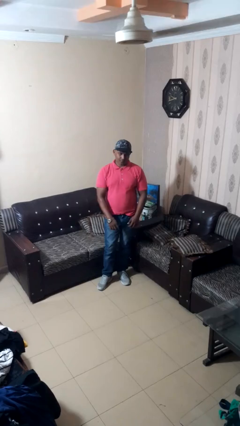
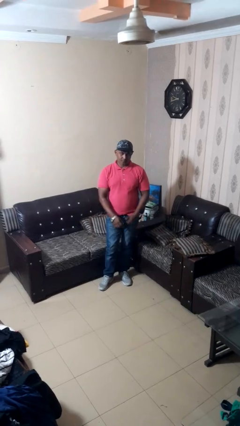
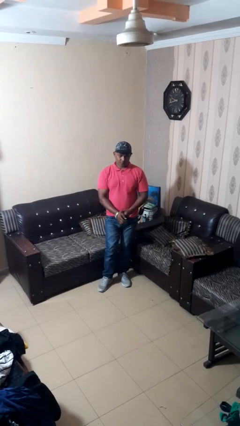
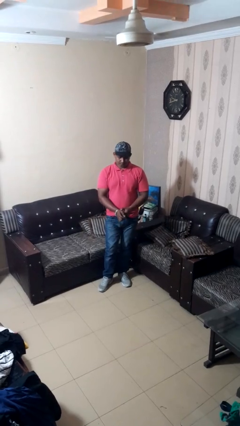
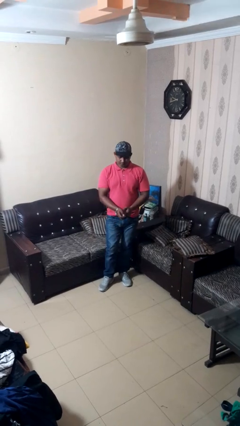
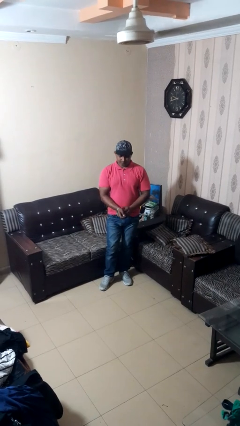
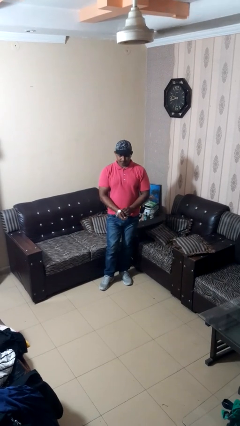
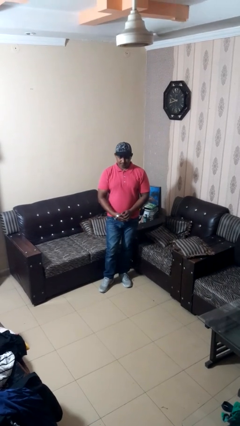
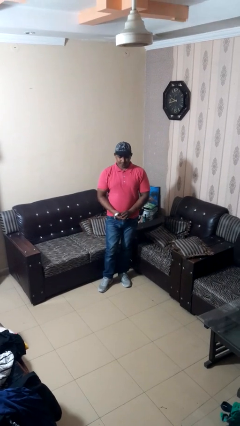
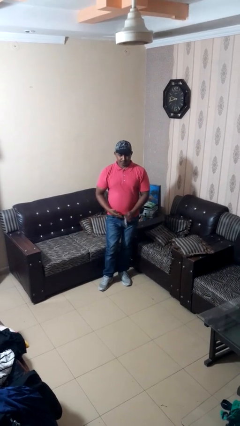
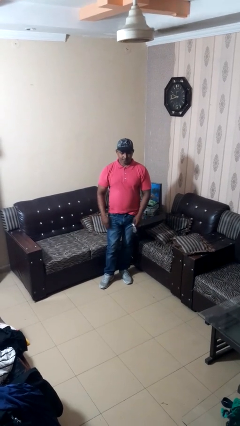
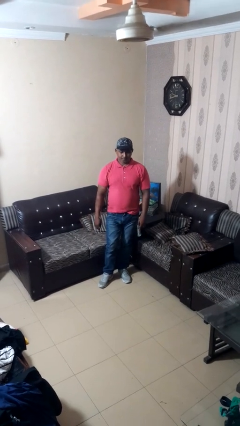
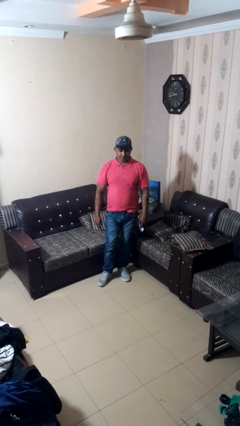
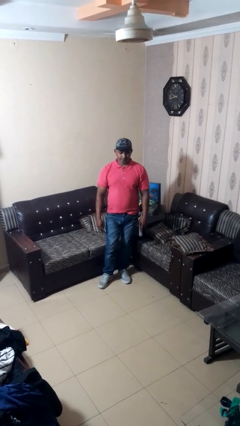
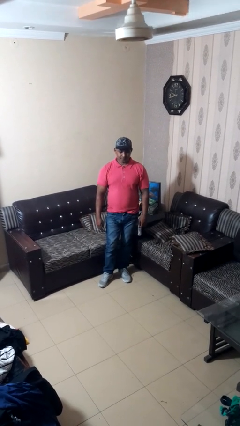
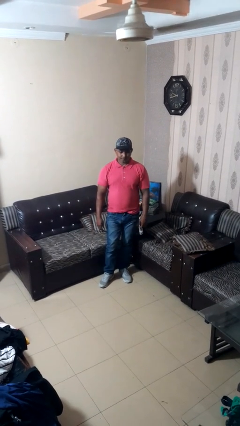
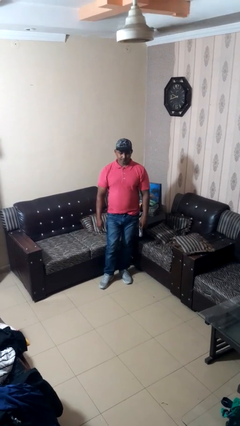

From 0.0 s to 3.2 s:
person takes off wristwatch

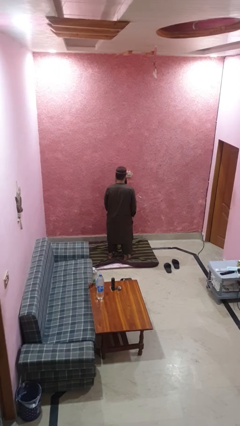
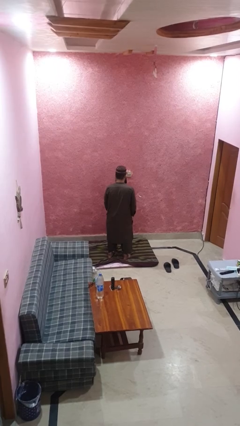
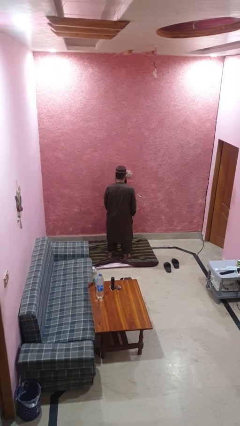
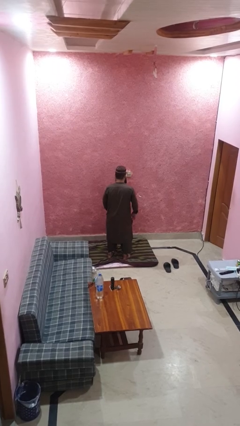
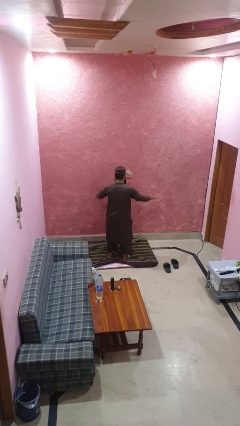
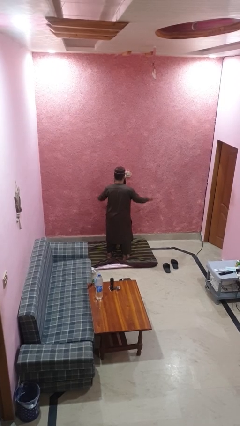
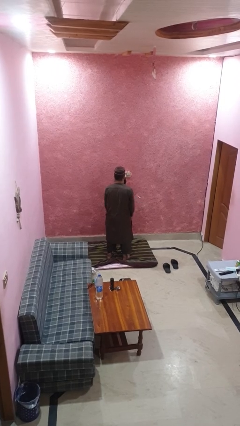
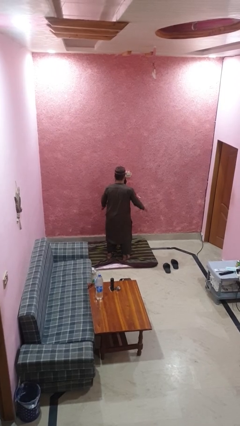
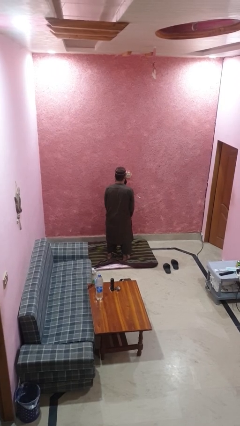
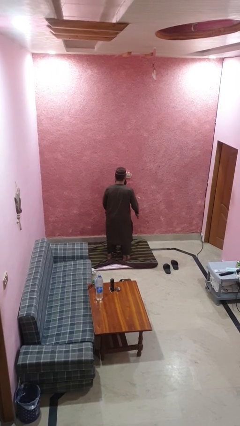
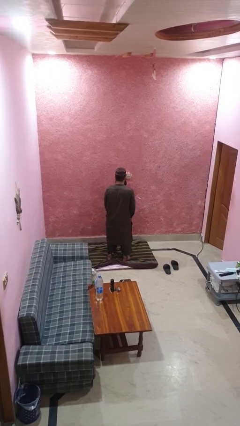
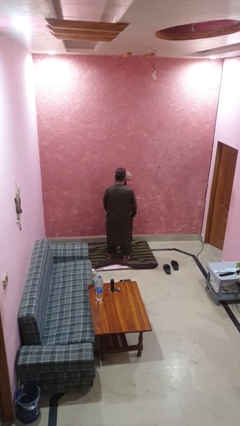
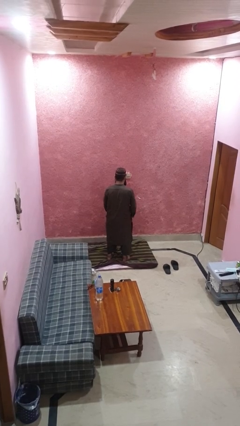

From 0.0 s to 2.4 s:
person slaps hands on thighs

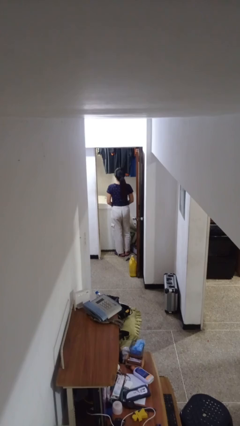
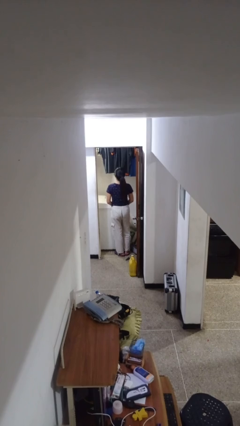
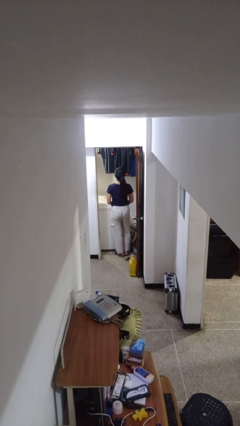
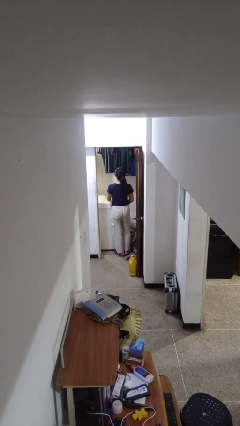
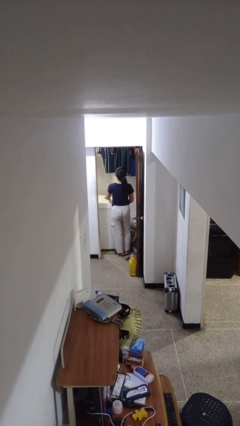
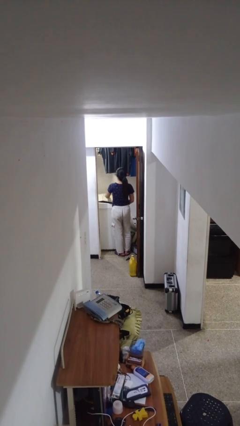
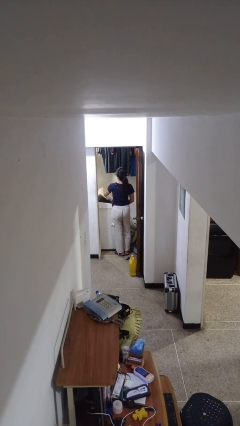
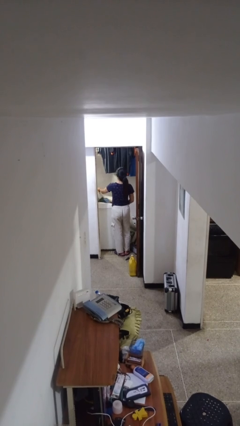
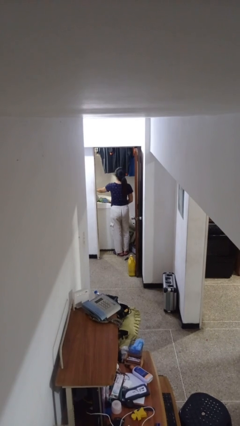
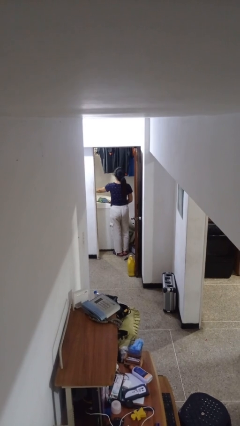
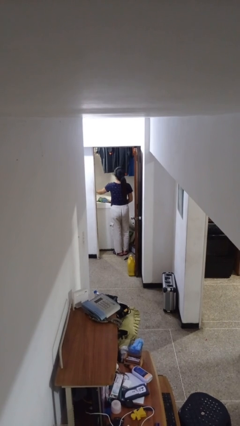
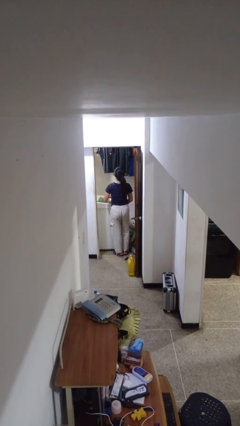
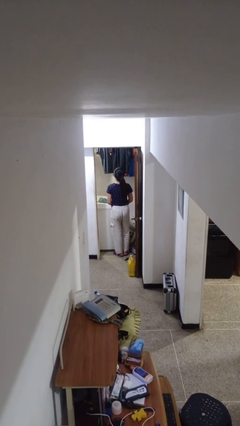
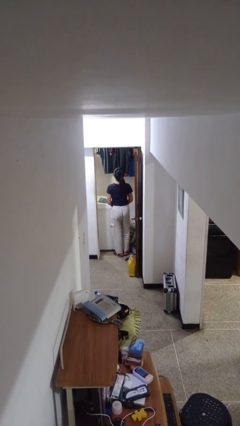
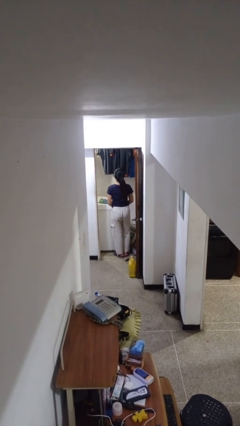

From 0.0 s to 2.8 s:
person opens clothes washer

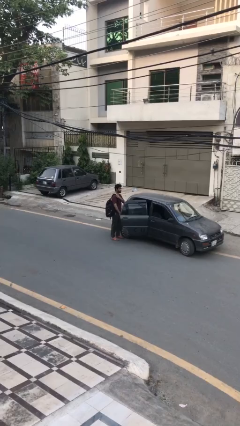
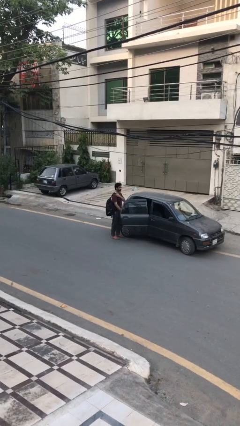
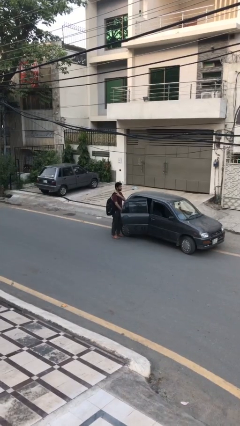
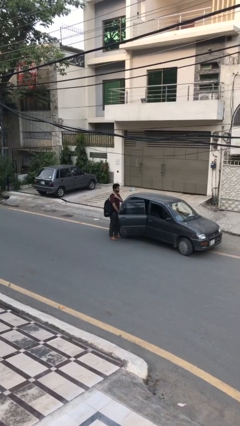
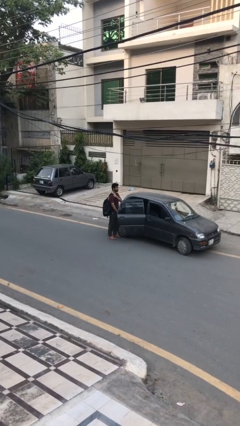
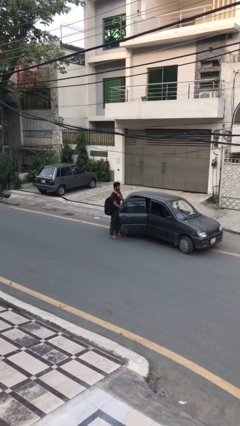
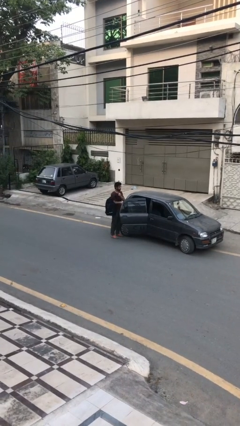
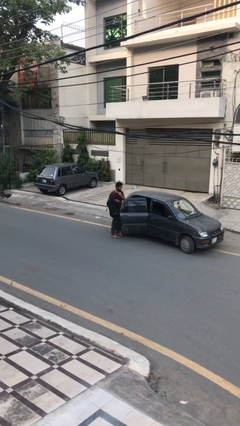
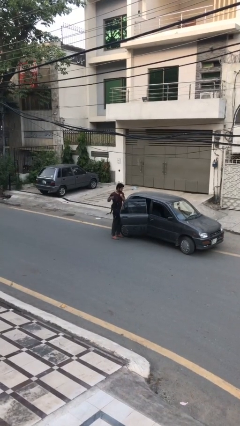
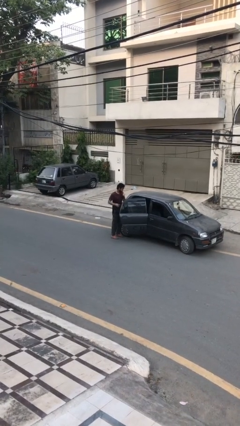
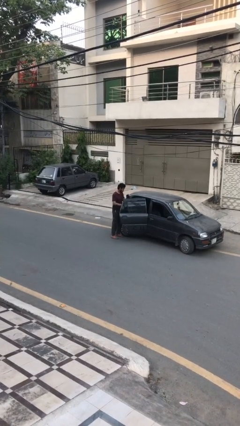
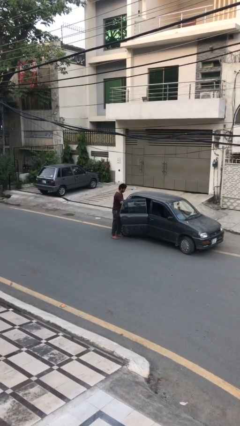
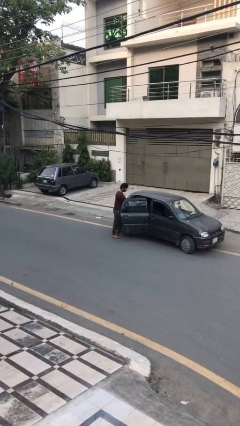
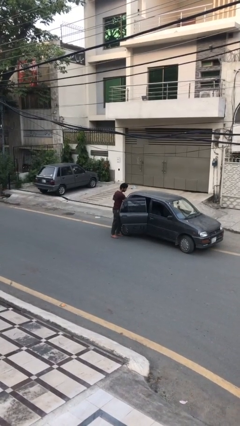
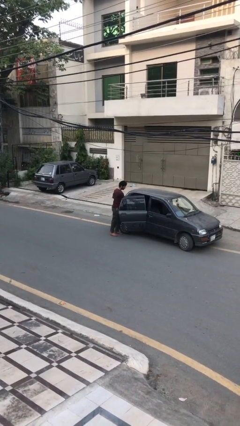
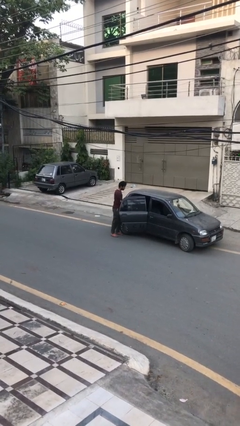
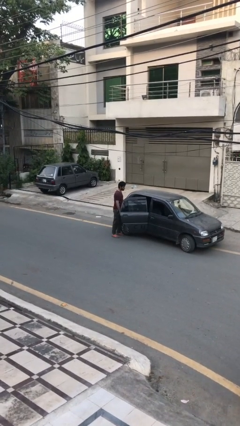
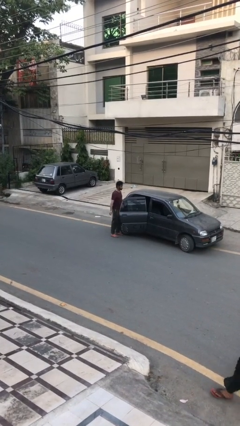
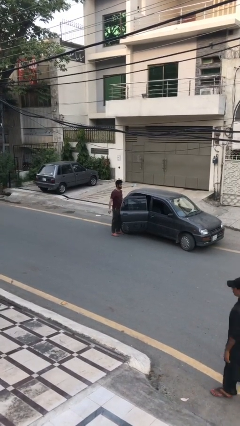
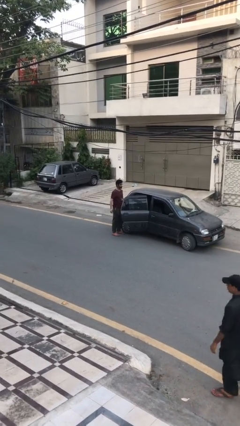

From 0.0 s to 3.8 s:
person loads car

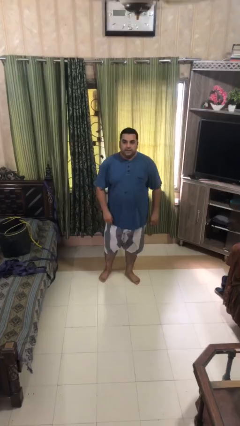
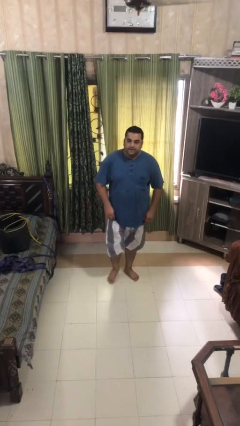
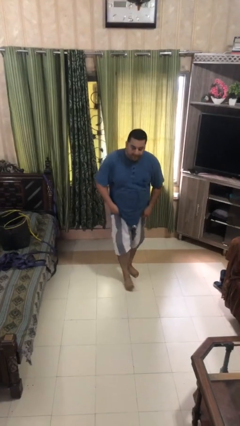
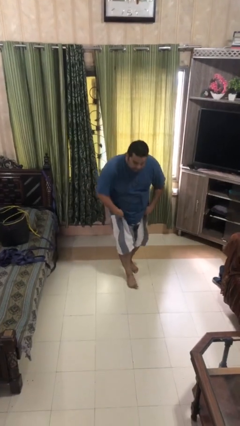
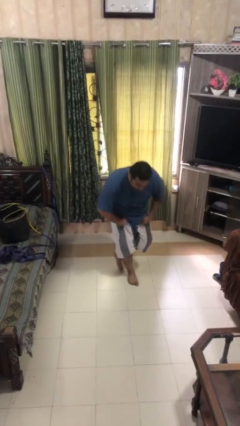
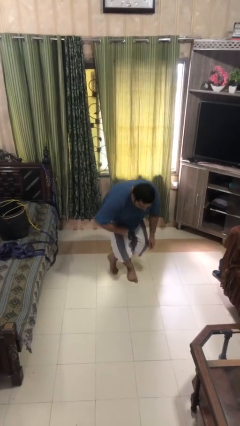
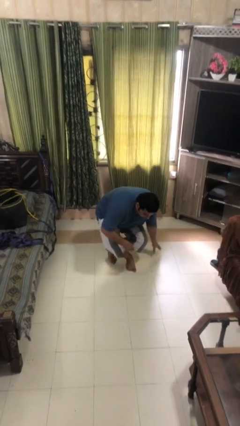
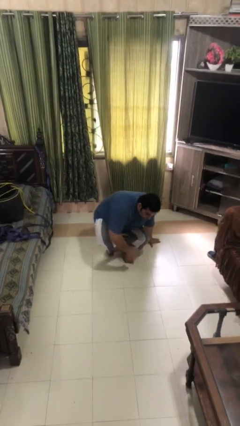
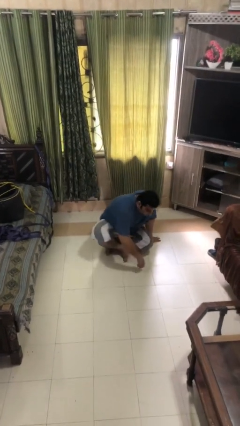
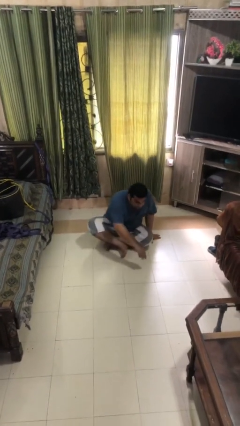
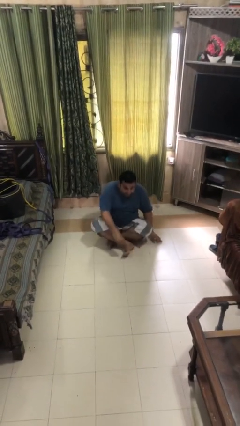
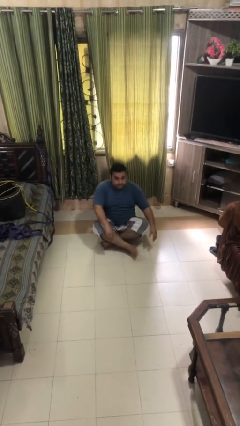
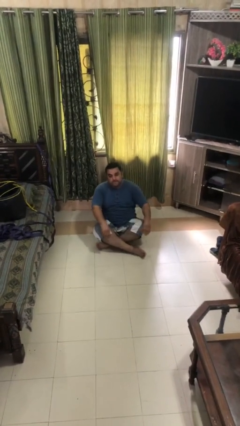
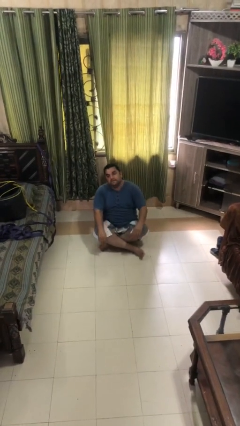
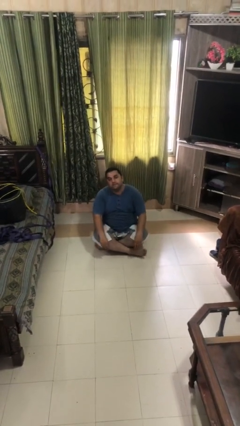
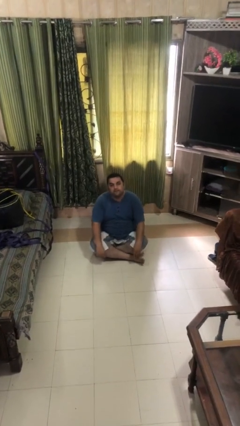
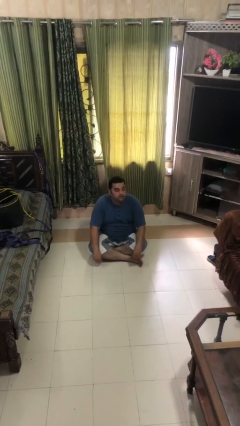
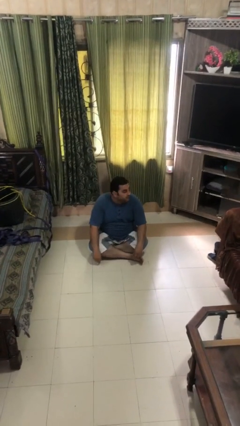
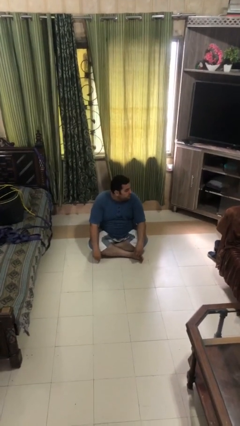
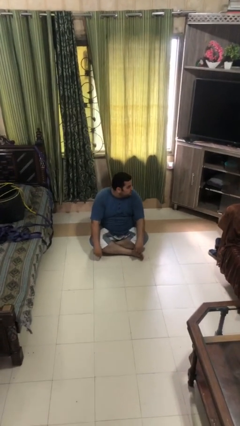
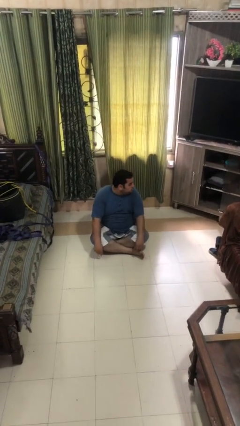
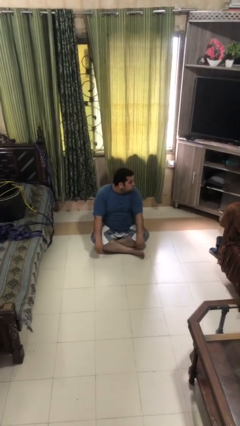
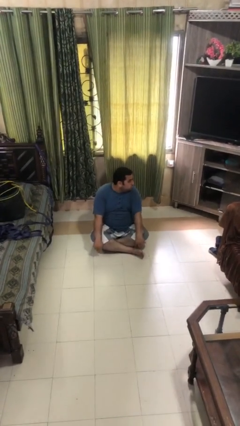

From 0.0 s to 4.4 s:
person sits crisscross

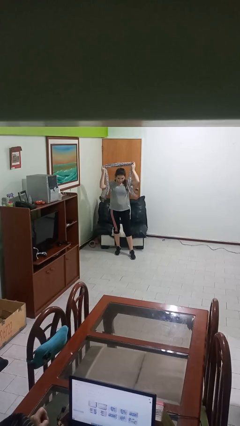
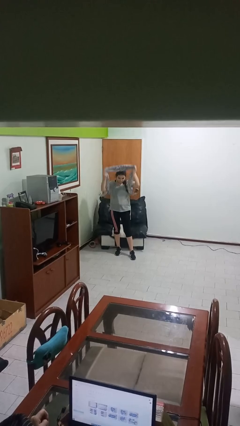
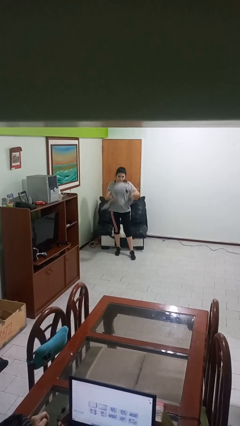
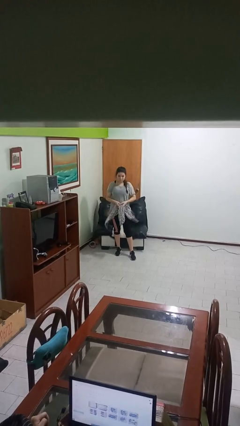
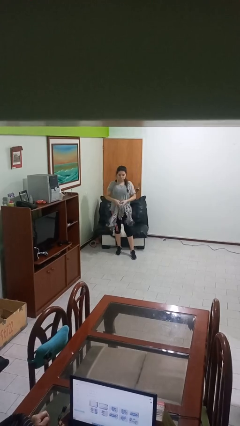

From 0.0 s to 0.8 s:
person takes off scarf

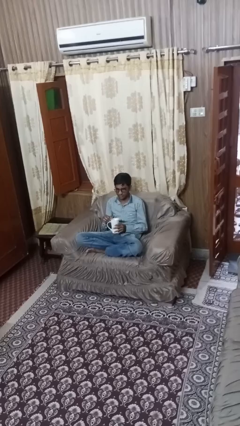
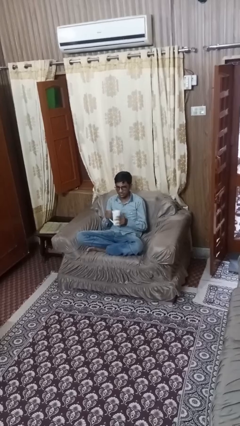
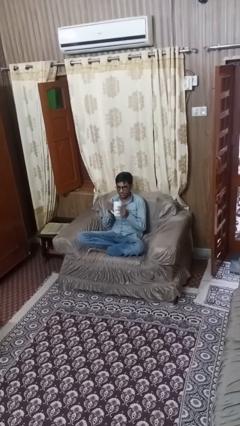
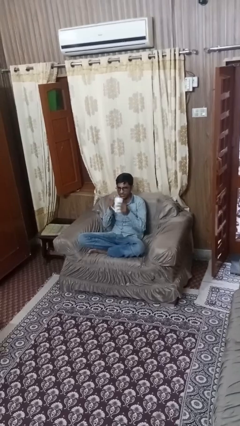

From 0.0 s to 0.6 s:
person stirs mug
